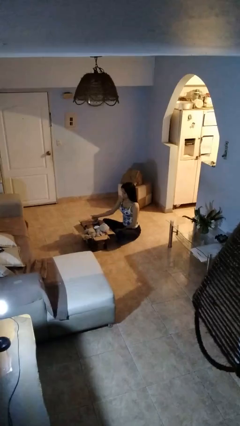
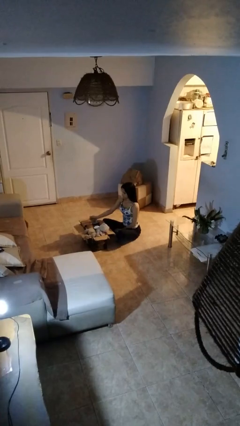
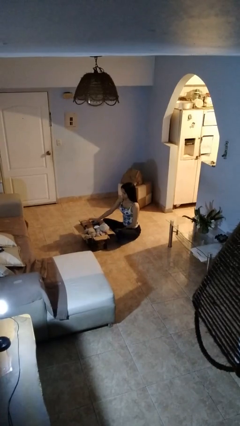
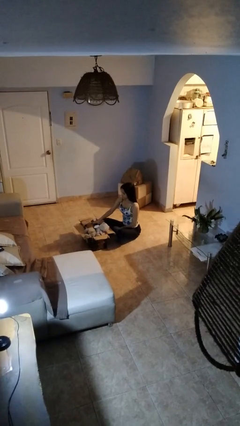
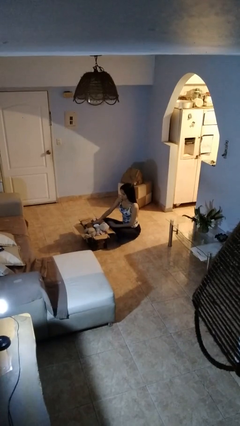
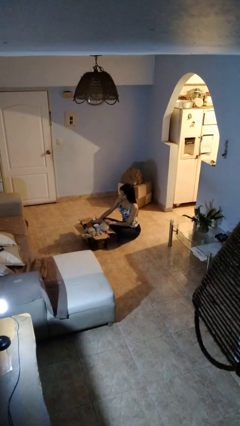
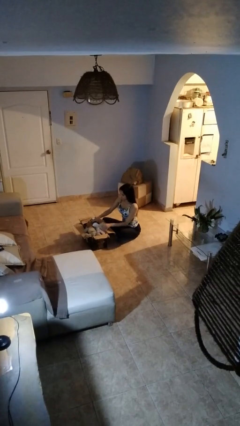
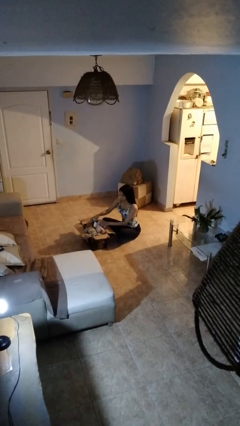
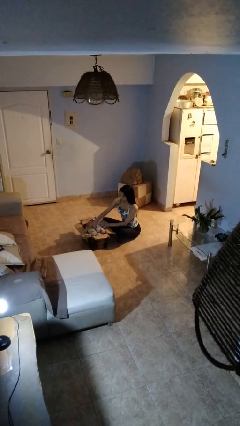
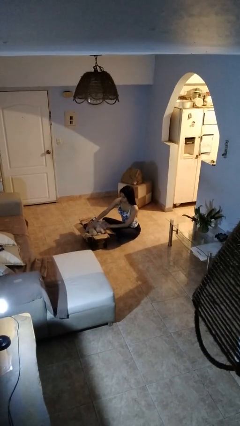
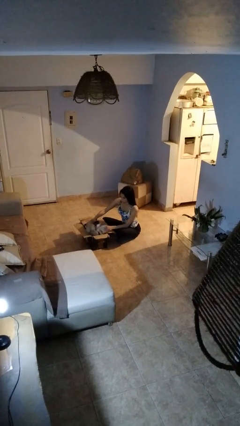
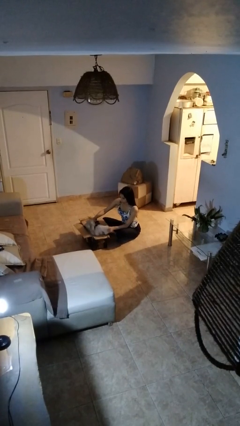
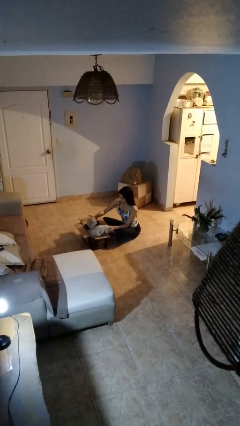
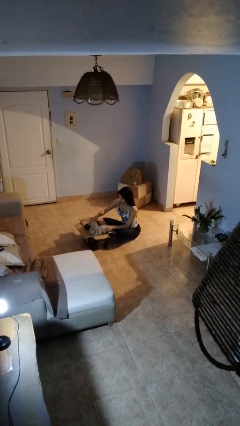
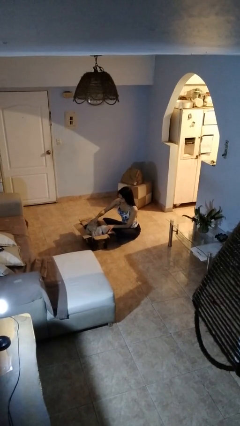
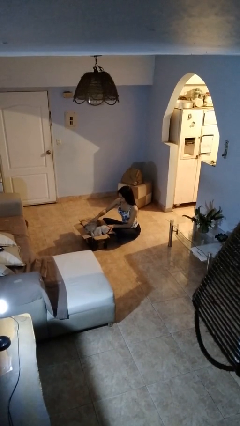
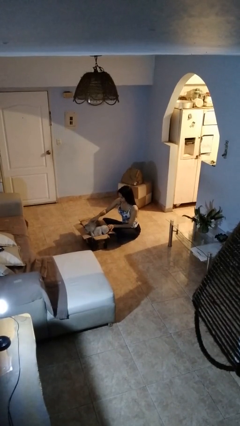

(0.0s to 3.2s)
person searches in box

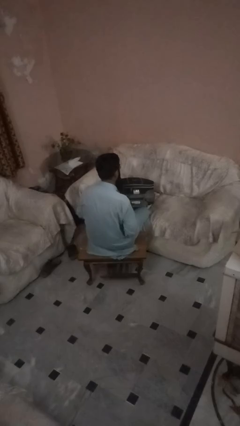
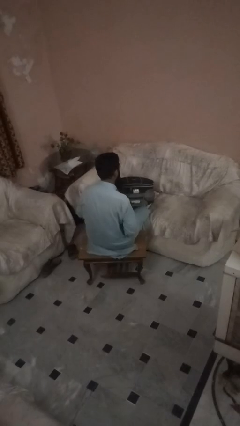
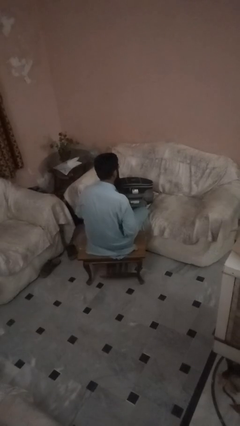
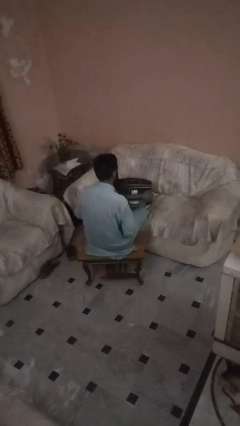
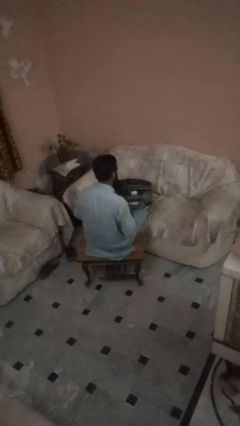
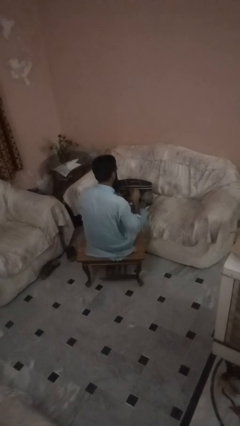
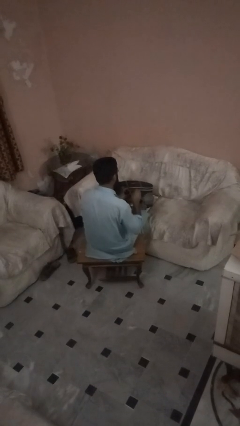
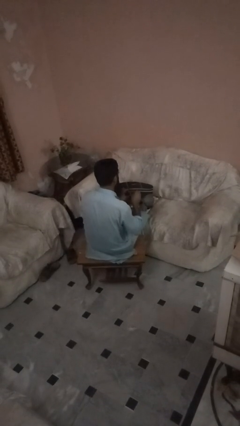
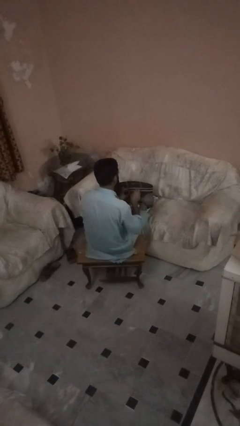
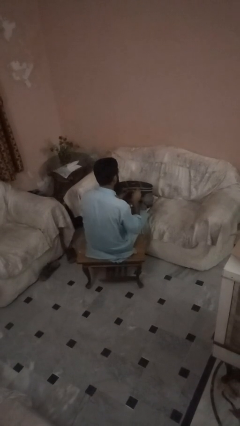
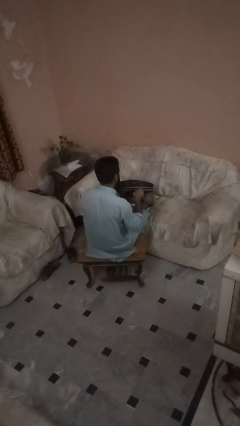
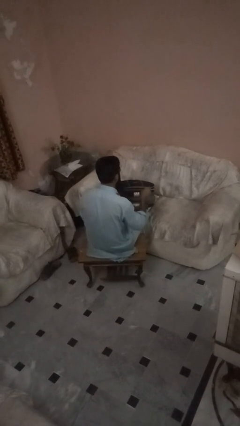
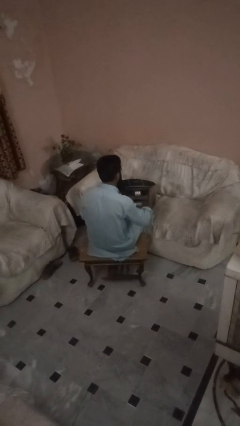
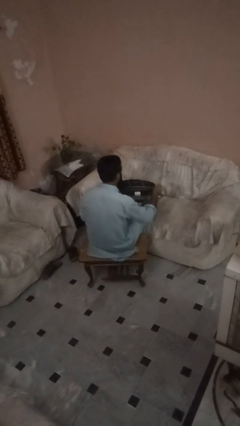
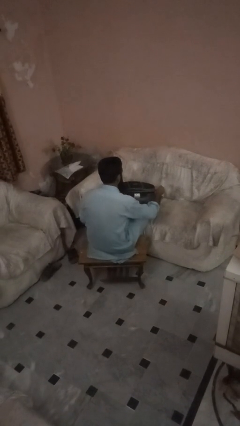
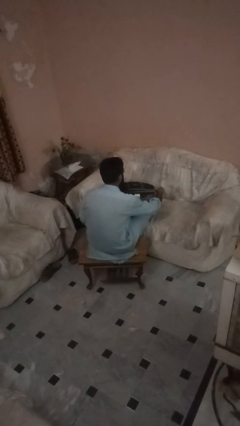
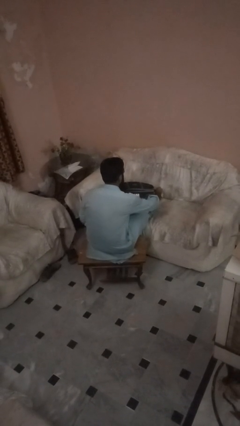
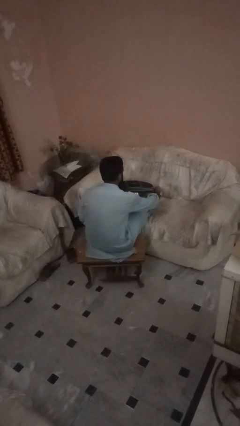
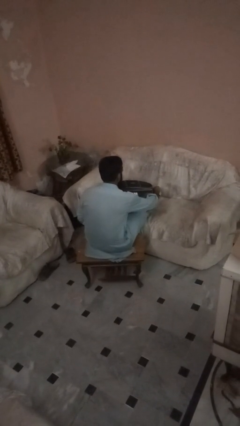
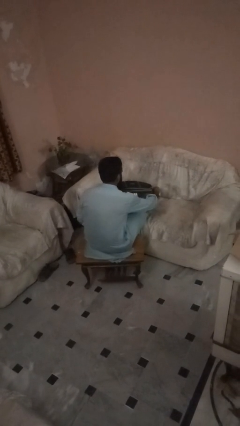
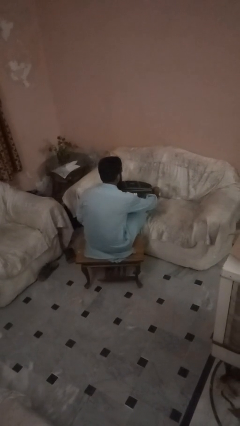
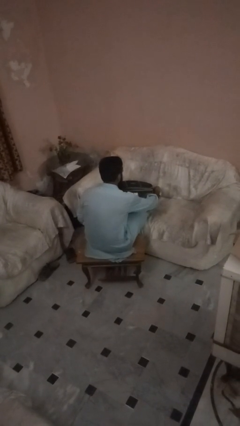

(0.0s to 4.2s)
person opens suitcase

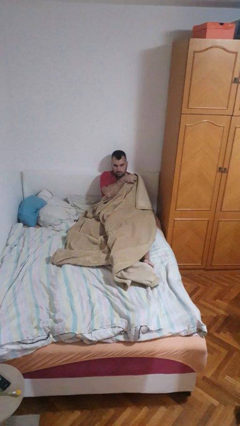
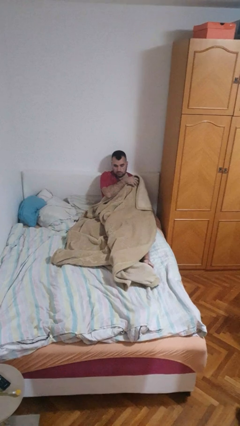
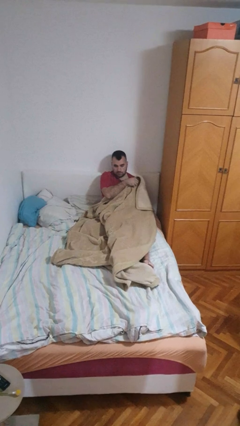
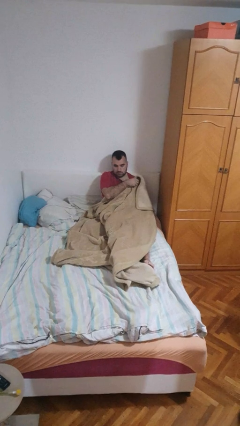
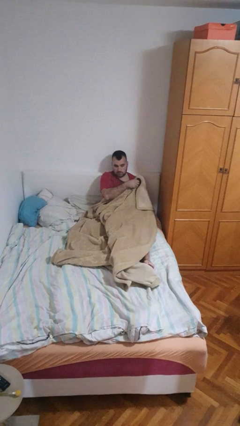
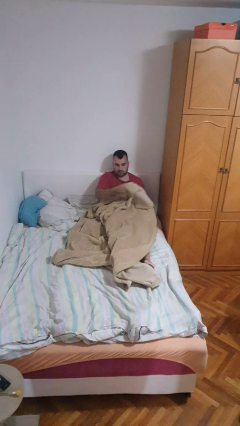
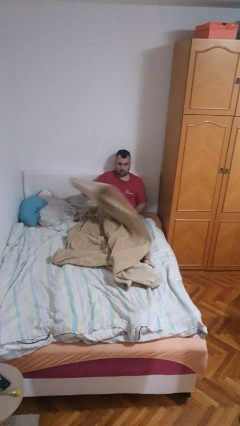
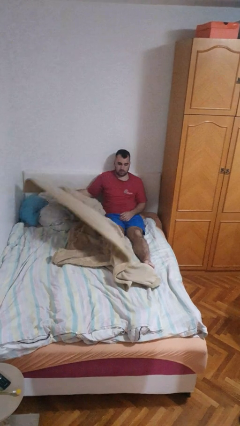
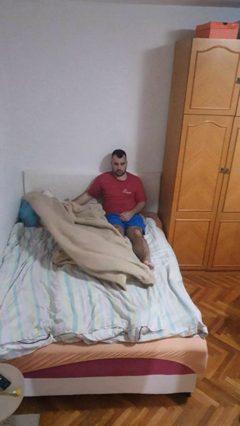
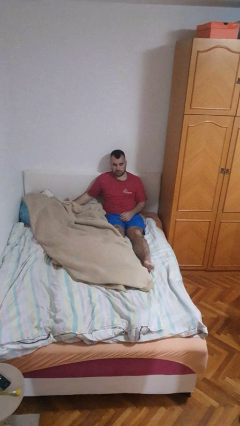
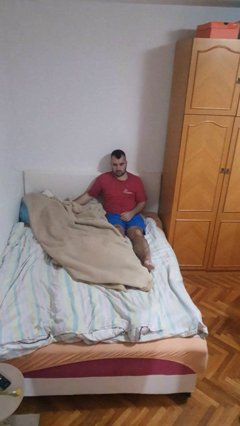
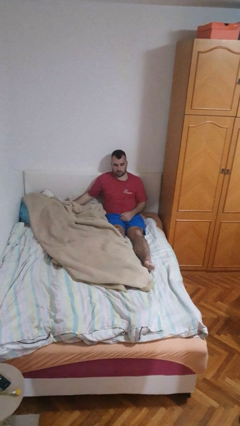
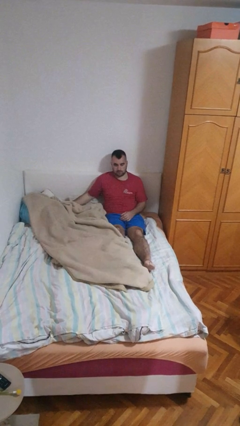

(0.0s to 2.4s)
person uncovers with blanket

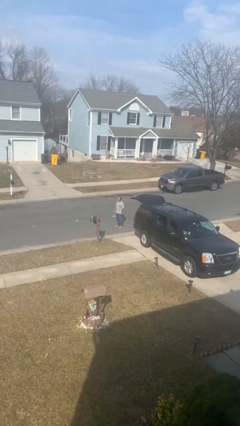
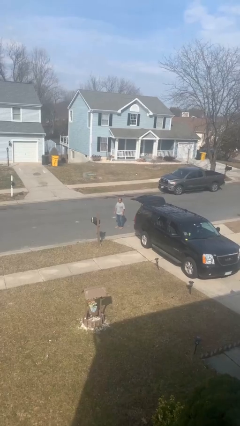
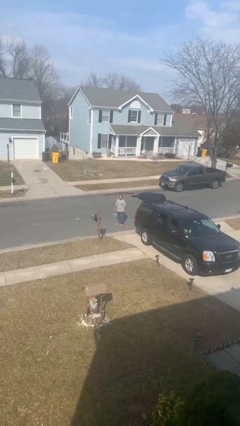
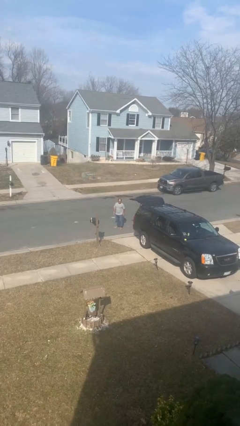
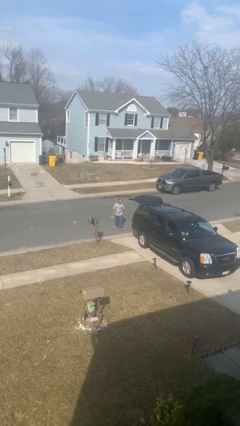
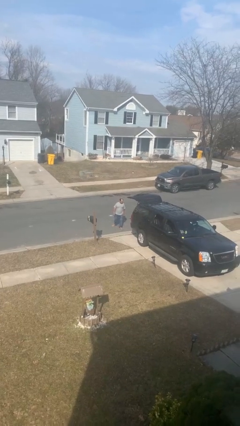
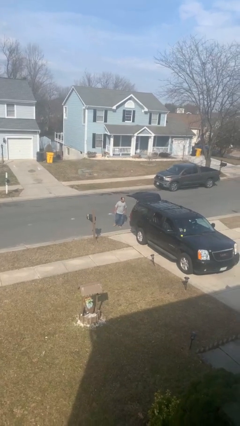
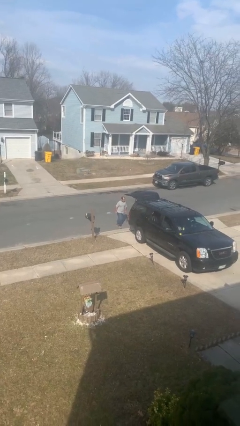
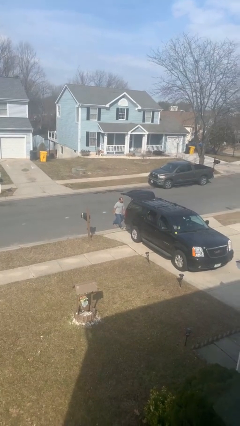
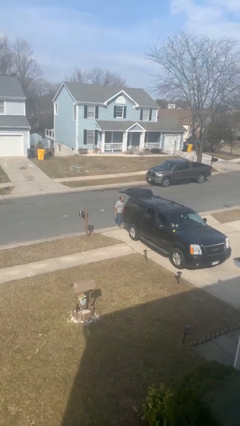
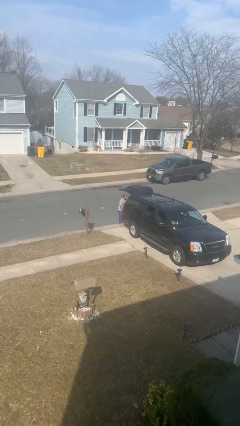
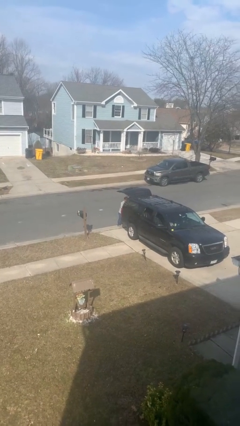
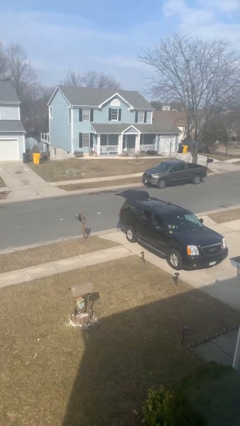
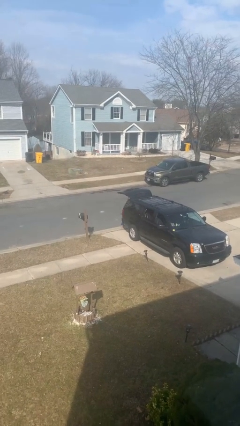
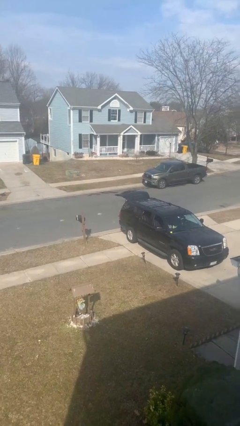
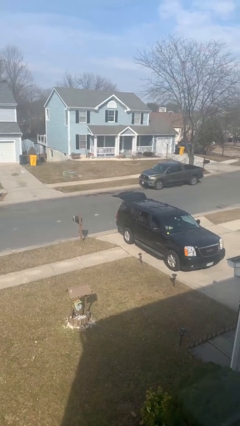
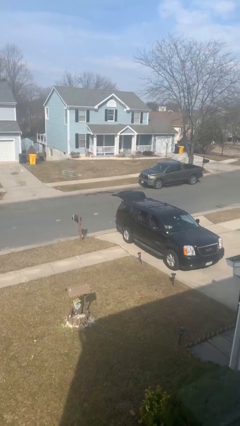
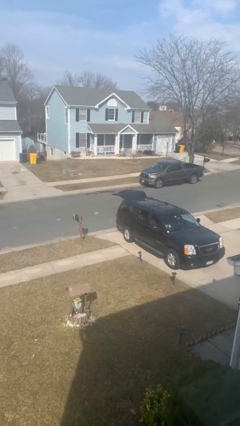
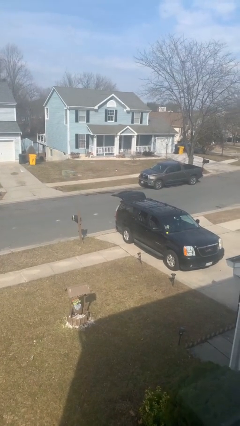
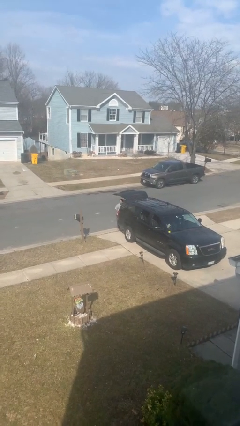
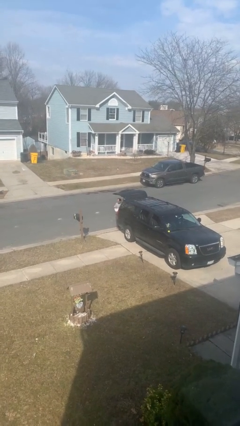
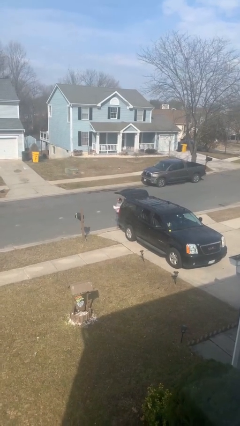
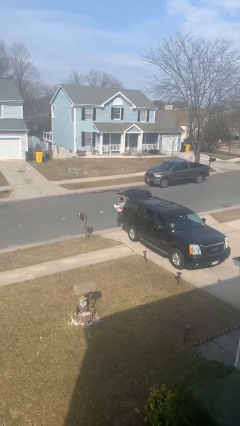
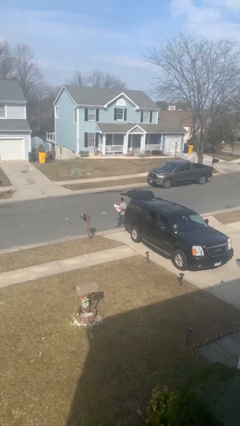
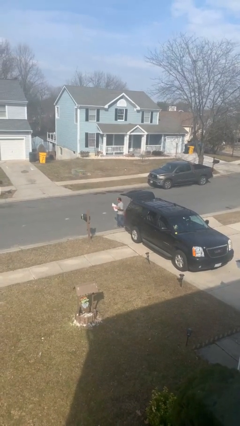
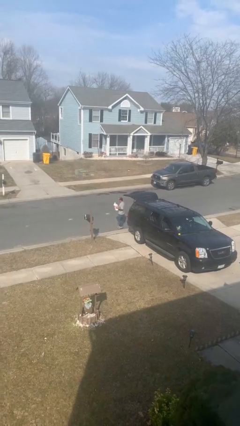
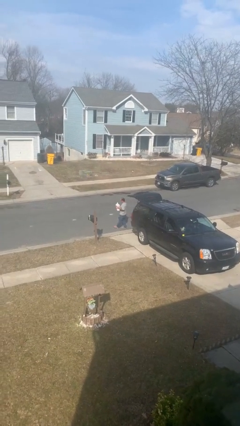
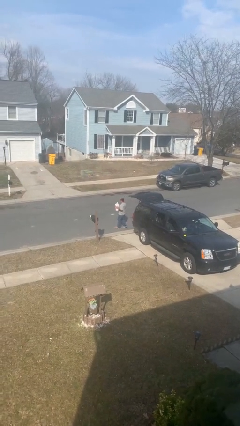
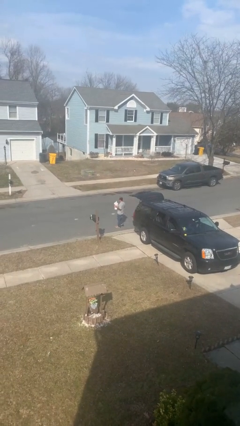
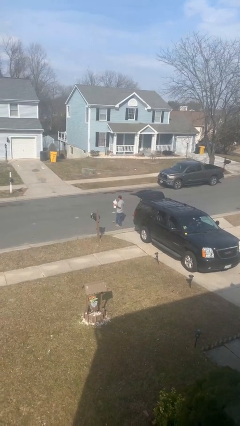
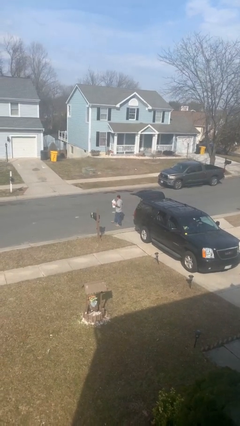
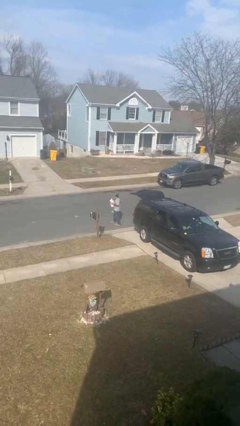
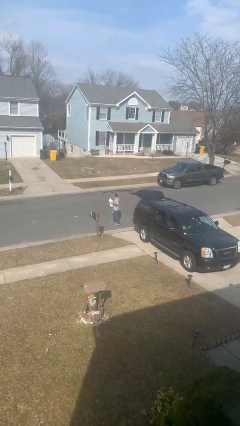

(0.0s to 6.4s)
person unloads car

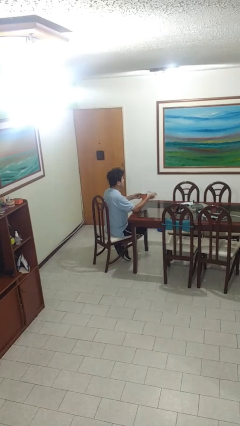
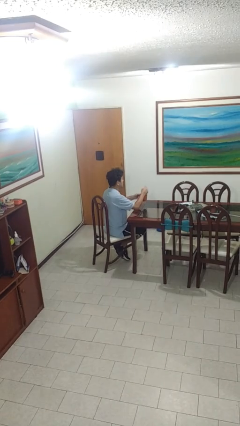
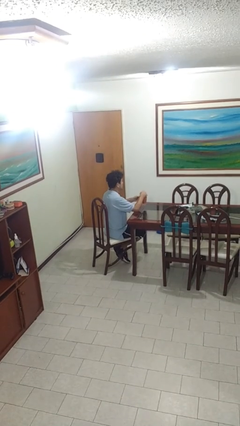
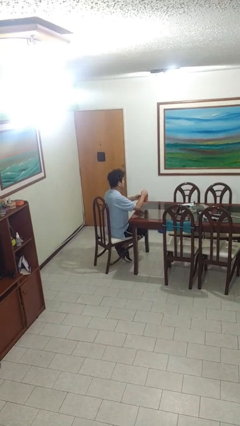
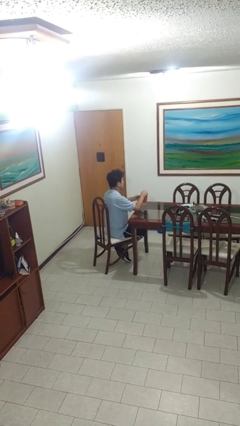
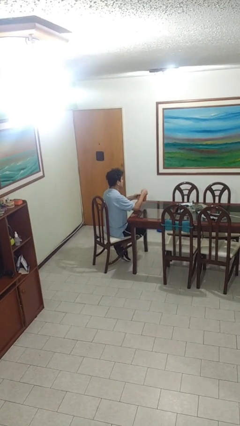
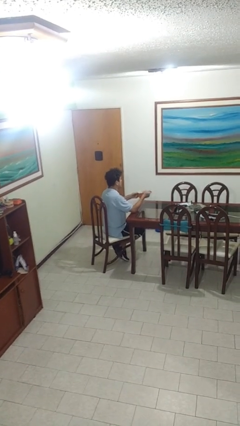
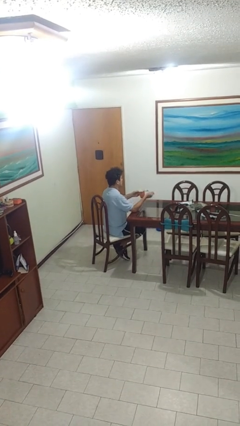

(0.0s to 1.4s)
person stirs mug
